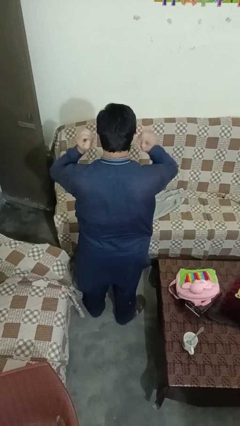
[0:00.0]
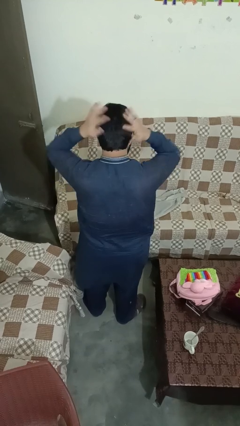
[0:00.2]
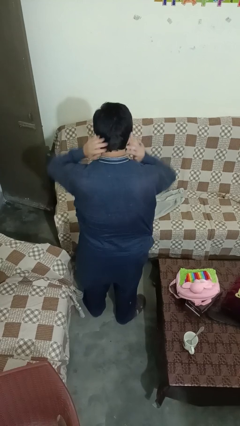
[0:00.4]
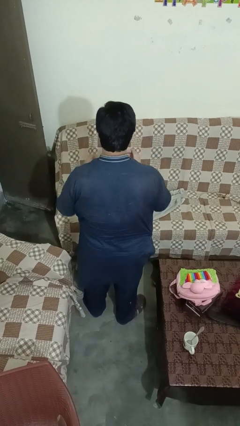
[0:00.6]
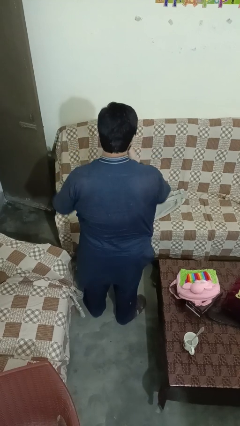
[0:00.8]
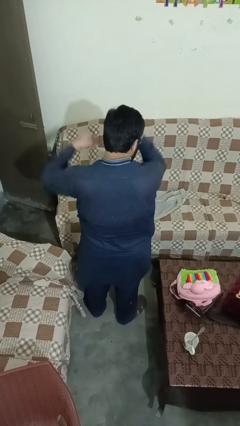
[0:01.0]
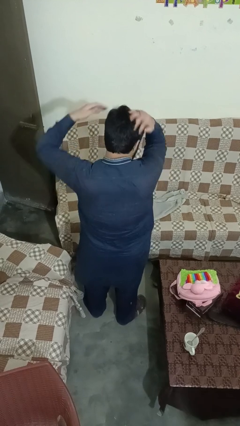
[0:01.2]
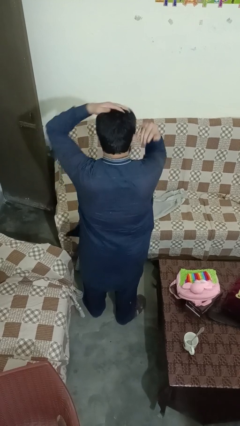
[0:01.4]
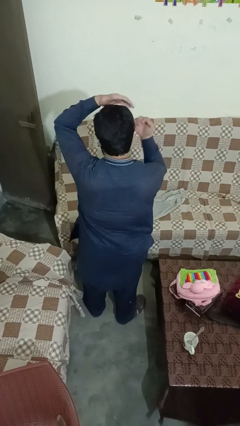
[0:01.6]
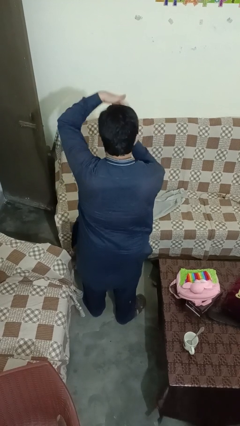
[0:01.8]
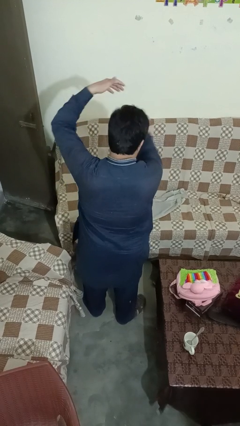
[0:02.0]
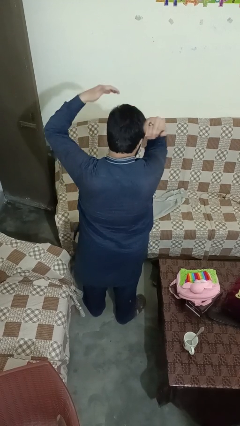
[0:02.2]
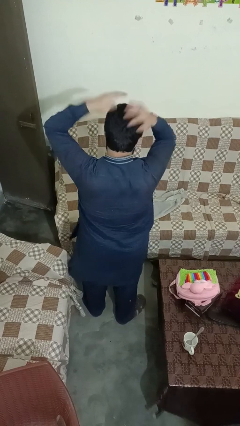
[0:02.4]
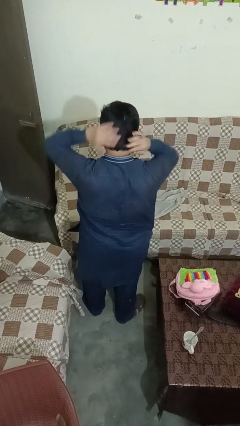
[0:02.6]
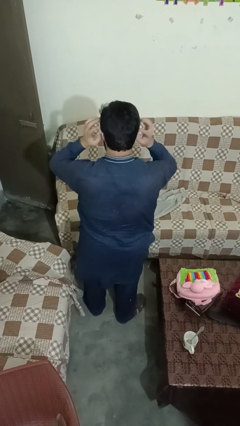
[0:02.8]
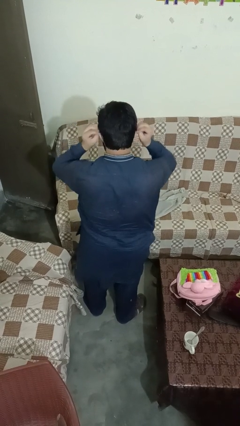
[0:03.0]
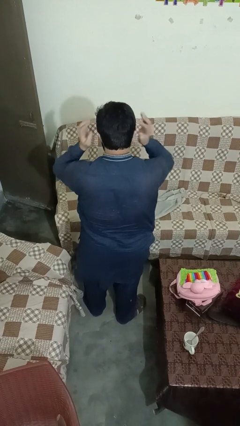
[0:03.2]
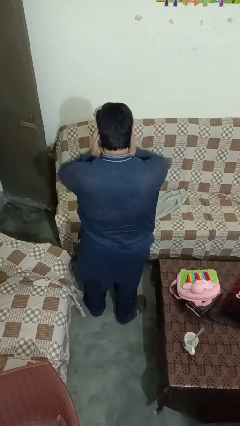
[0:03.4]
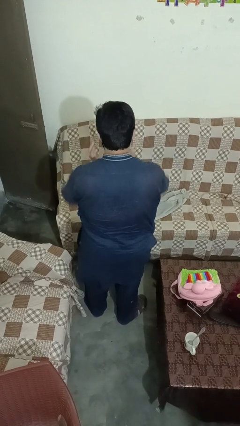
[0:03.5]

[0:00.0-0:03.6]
person strokes hair

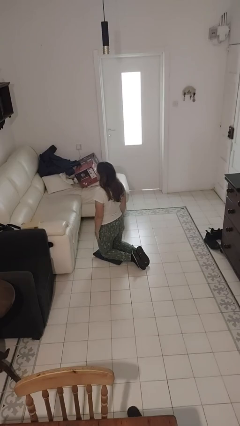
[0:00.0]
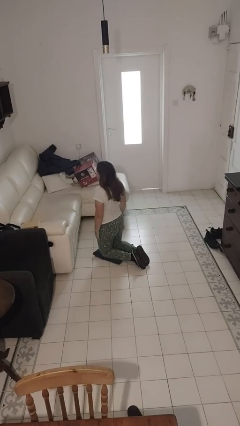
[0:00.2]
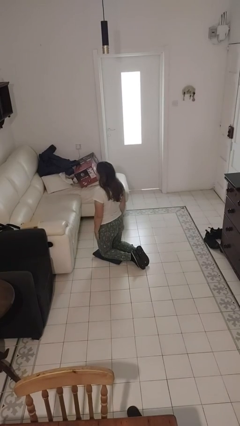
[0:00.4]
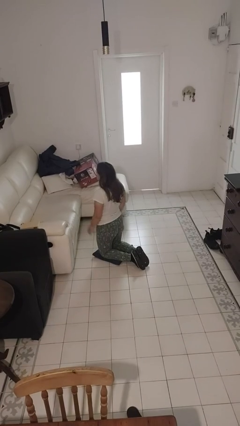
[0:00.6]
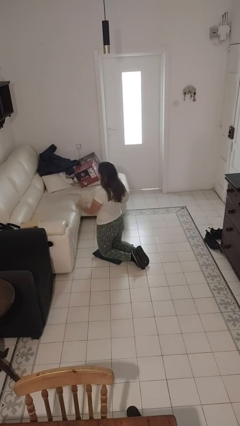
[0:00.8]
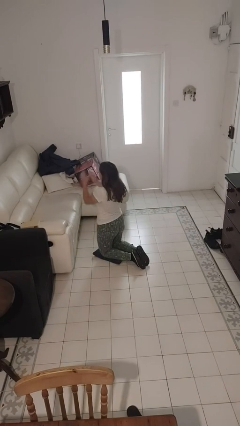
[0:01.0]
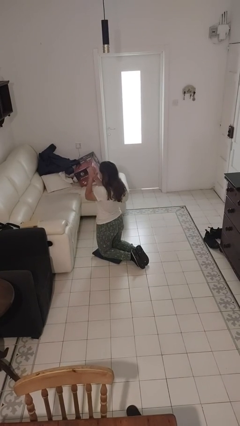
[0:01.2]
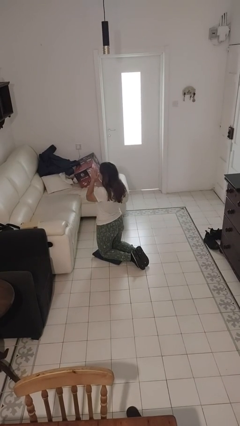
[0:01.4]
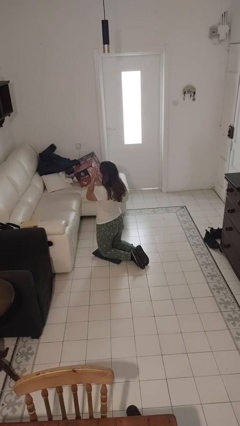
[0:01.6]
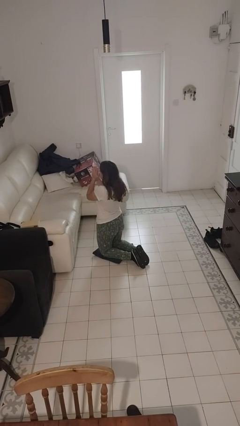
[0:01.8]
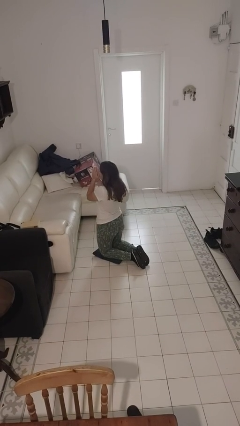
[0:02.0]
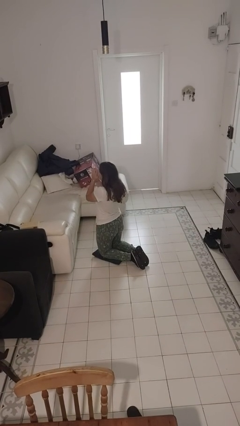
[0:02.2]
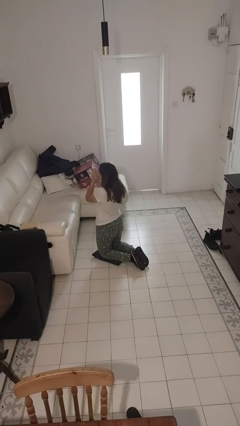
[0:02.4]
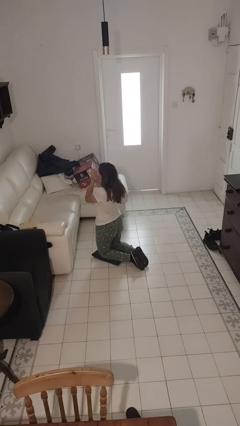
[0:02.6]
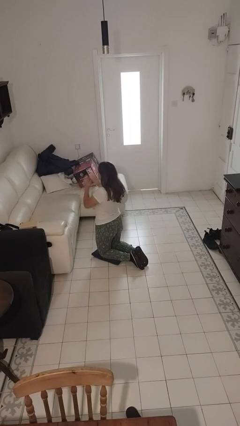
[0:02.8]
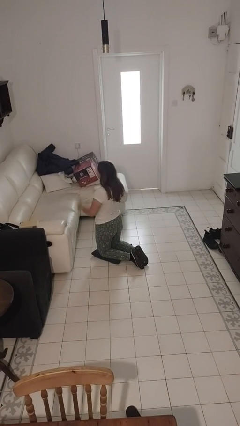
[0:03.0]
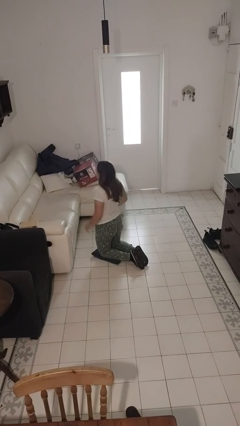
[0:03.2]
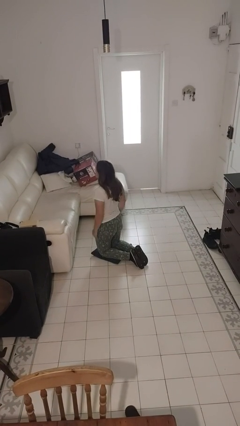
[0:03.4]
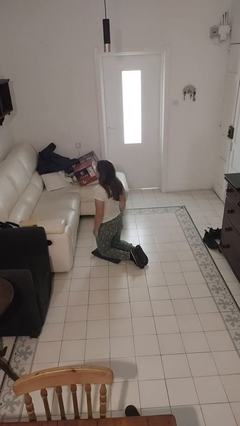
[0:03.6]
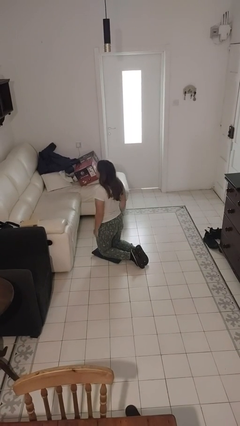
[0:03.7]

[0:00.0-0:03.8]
person prays

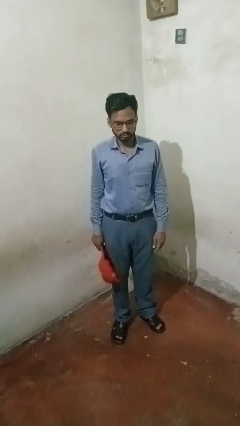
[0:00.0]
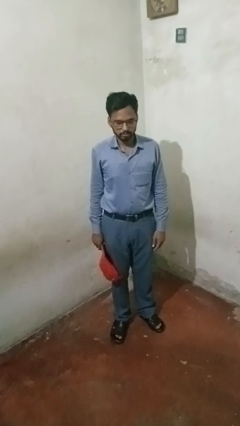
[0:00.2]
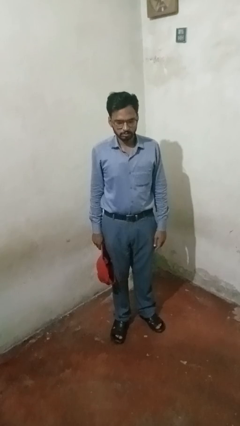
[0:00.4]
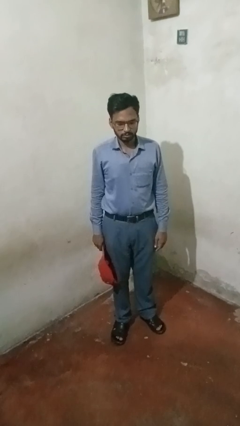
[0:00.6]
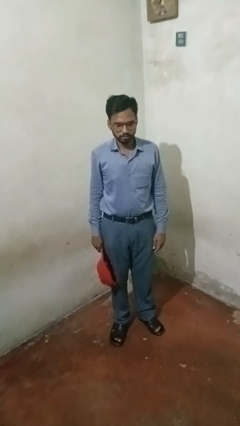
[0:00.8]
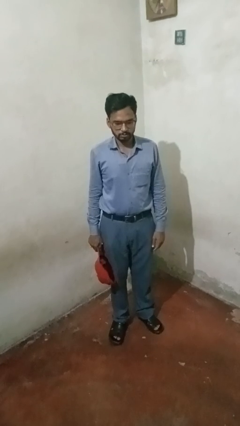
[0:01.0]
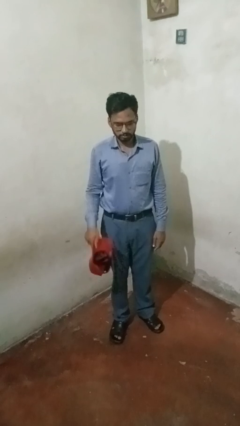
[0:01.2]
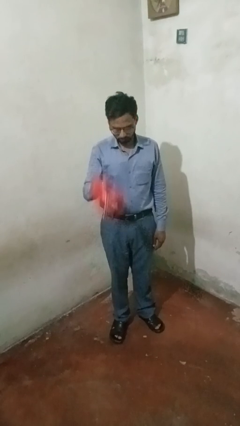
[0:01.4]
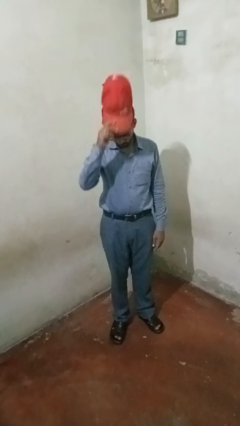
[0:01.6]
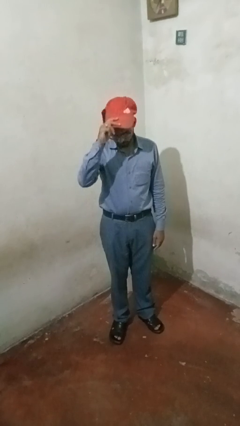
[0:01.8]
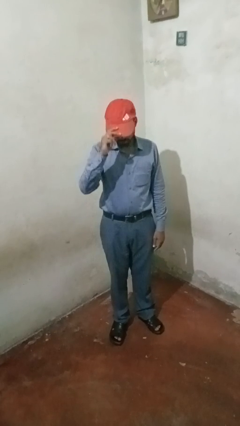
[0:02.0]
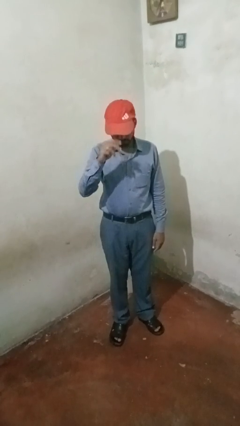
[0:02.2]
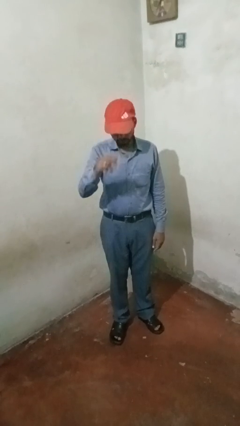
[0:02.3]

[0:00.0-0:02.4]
person puts on hat

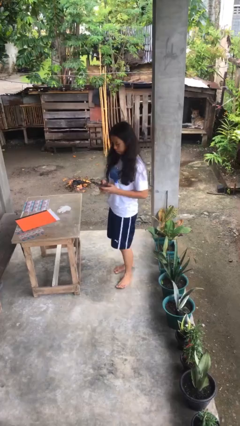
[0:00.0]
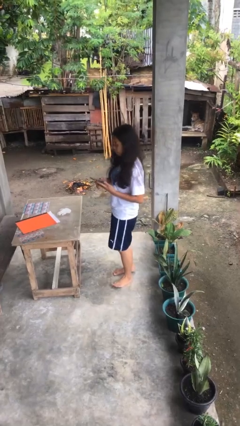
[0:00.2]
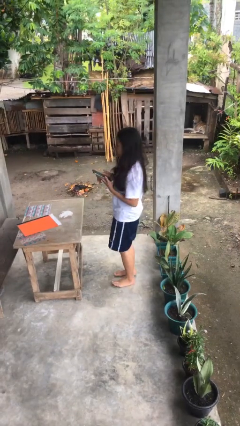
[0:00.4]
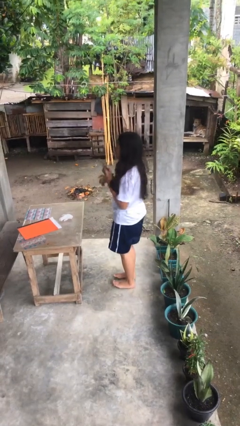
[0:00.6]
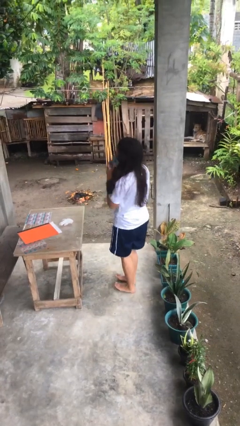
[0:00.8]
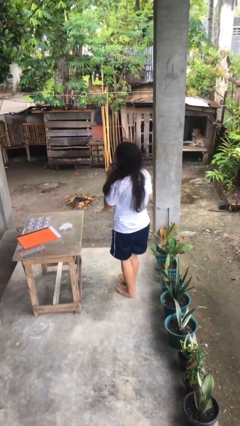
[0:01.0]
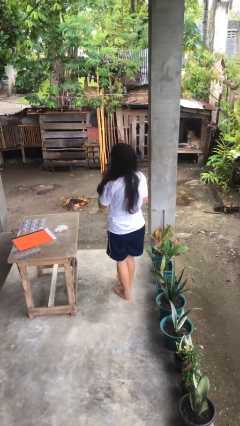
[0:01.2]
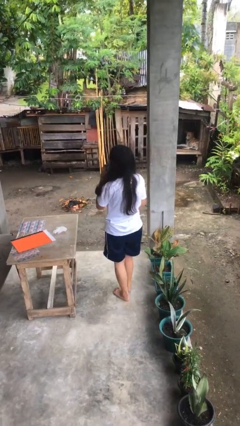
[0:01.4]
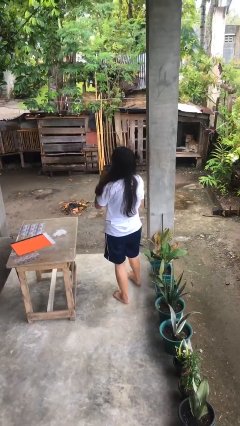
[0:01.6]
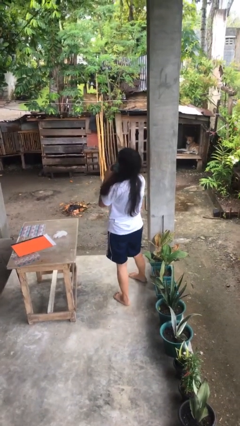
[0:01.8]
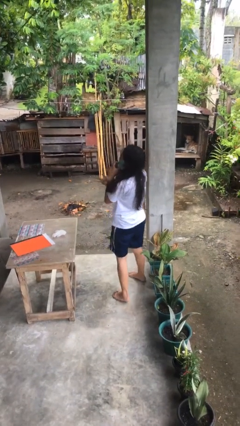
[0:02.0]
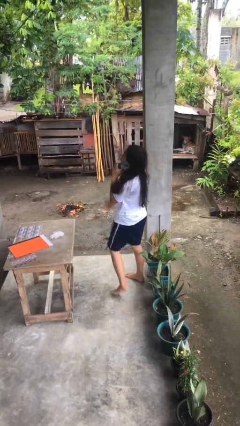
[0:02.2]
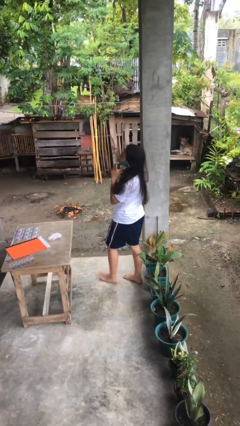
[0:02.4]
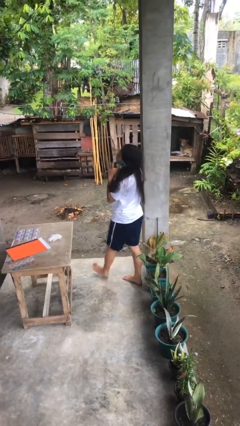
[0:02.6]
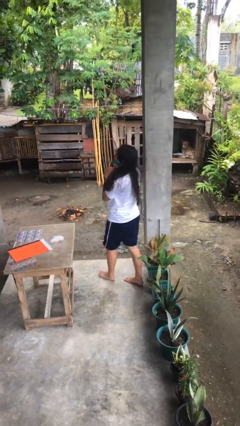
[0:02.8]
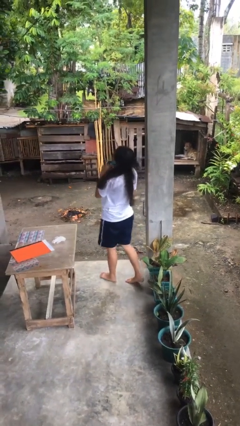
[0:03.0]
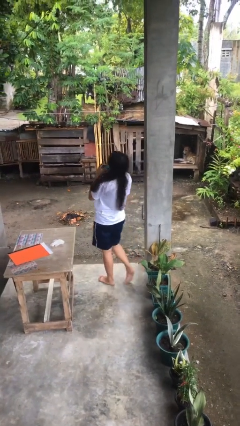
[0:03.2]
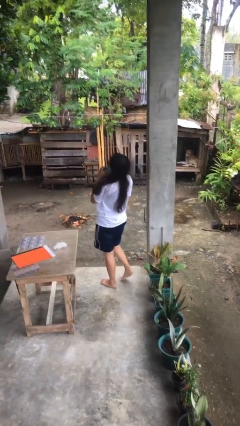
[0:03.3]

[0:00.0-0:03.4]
person talks on phone

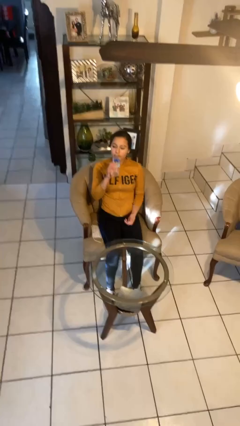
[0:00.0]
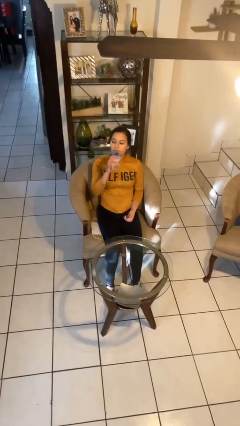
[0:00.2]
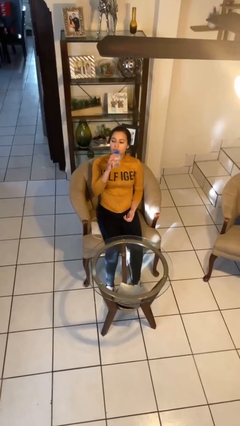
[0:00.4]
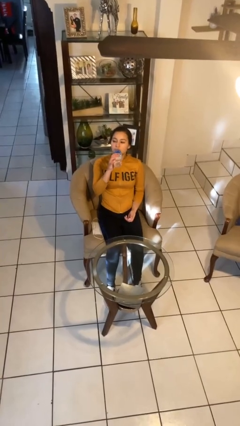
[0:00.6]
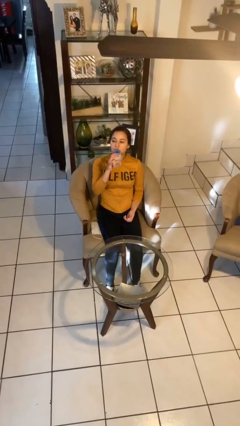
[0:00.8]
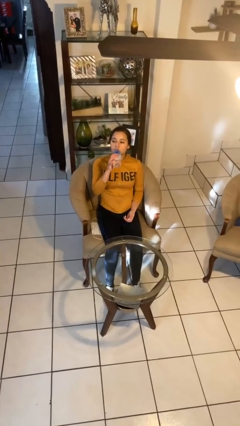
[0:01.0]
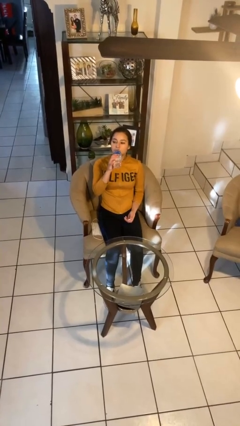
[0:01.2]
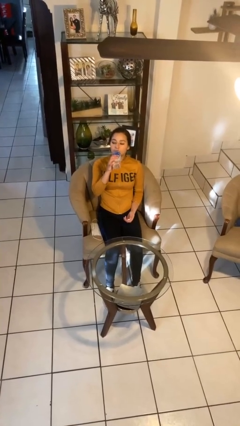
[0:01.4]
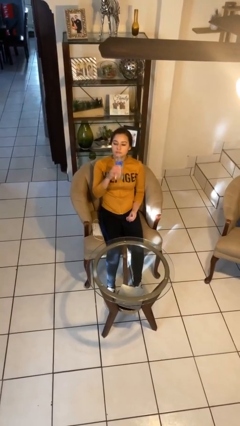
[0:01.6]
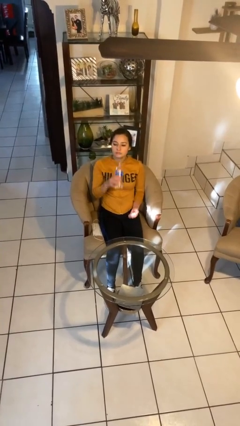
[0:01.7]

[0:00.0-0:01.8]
person drinks from bottle

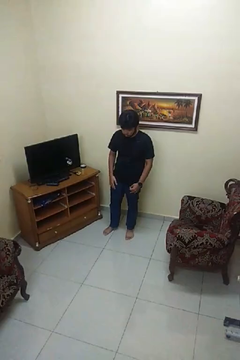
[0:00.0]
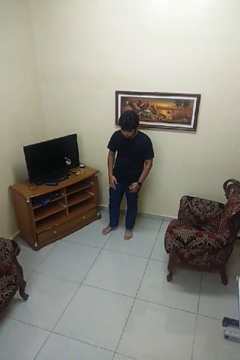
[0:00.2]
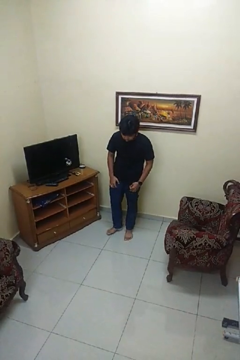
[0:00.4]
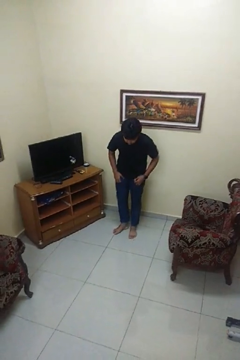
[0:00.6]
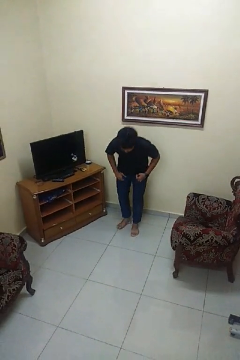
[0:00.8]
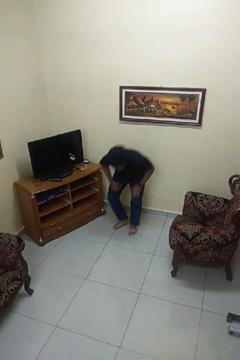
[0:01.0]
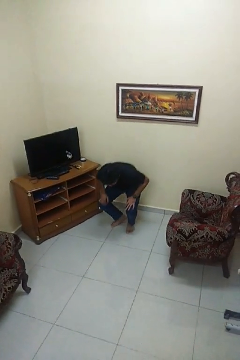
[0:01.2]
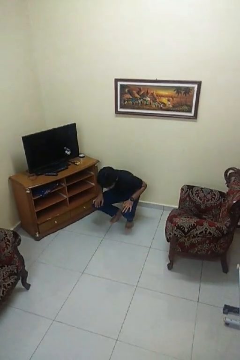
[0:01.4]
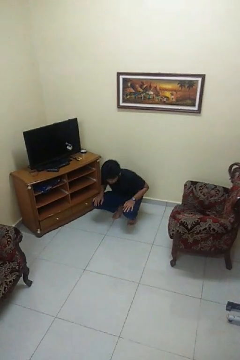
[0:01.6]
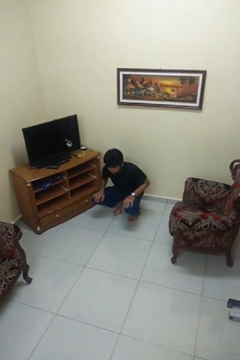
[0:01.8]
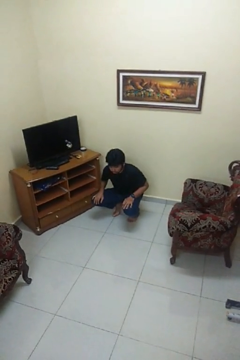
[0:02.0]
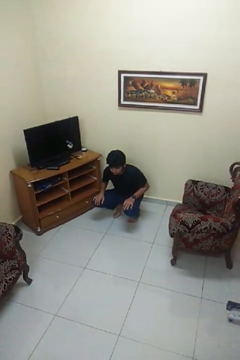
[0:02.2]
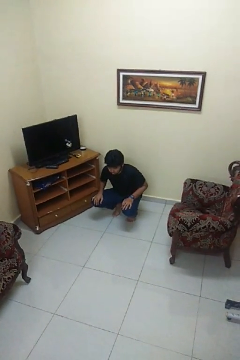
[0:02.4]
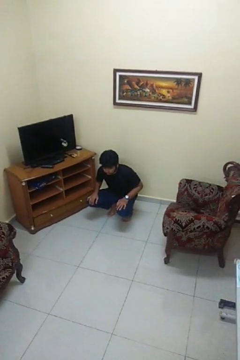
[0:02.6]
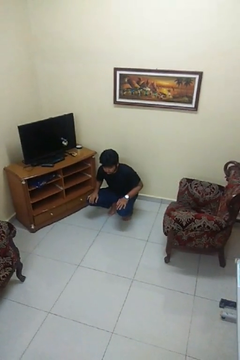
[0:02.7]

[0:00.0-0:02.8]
person squats
